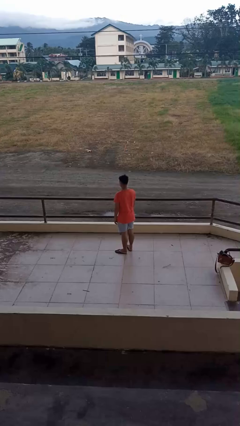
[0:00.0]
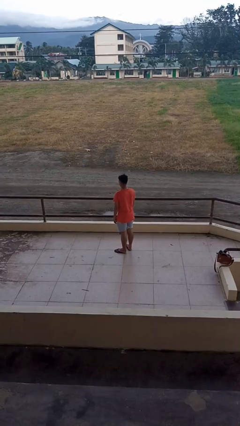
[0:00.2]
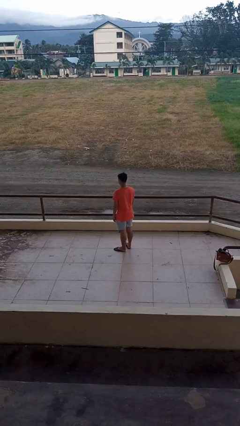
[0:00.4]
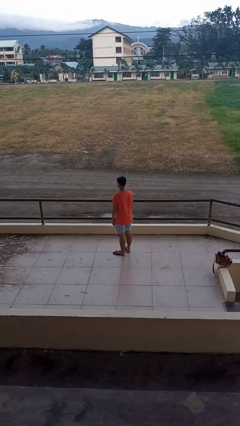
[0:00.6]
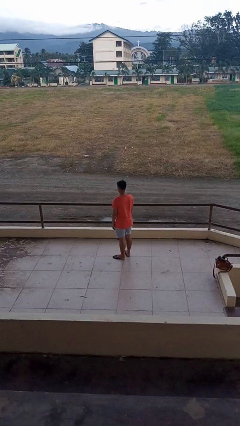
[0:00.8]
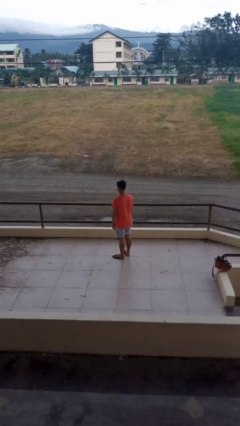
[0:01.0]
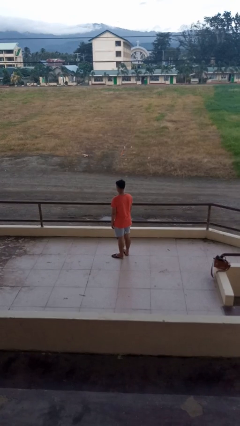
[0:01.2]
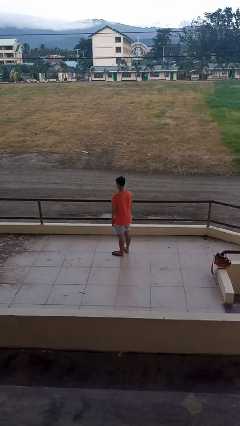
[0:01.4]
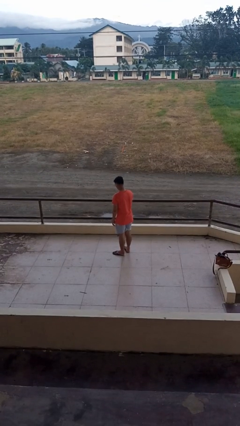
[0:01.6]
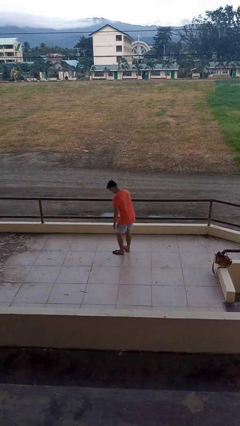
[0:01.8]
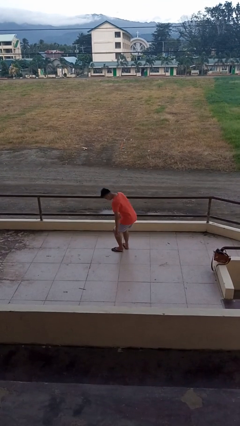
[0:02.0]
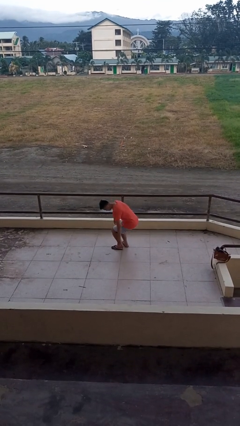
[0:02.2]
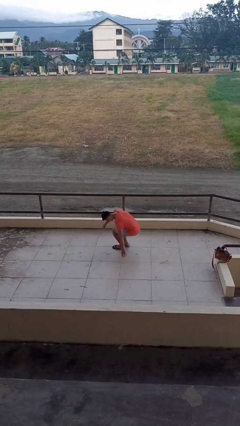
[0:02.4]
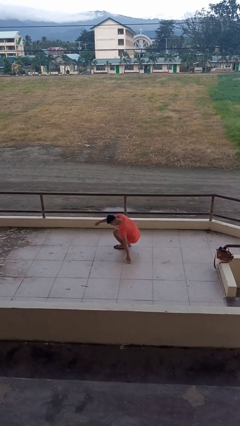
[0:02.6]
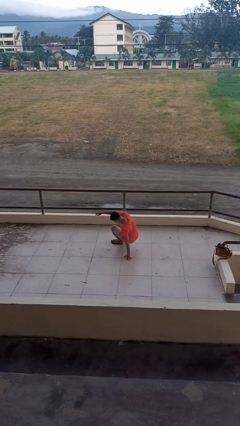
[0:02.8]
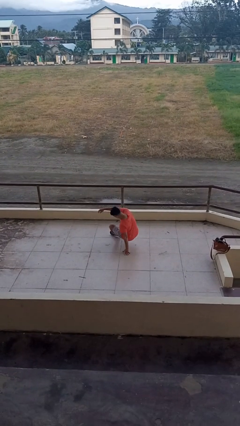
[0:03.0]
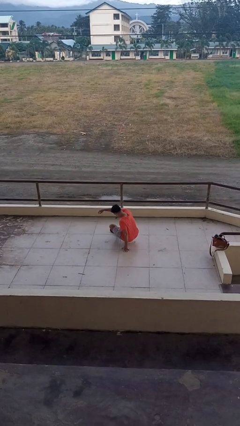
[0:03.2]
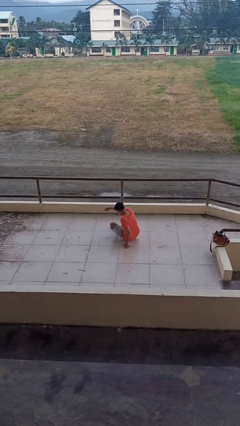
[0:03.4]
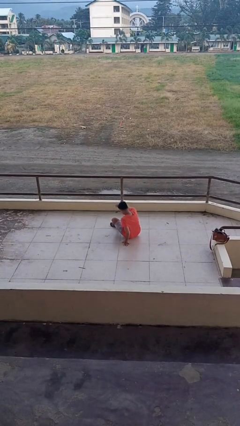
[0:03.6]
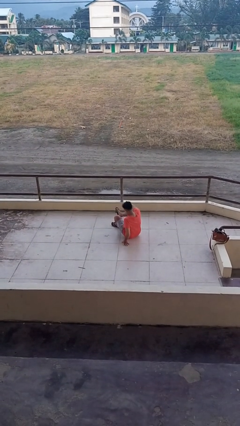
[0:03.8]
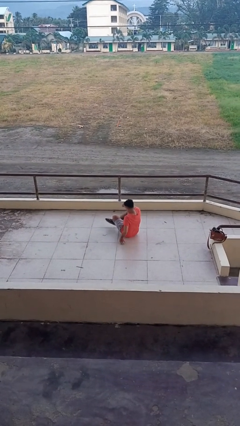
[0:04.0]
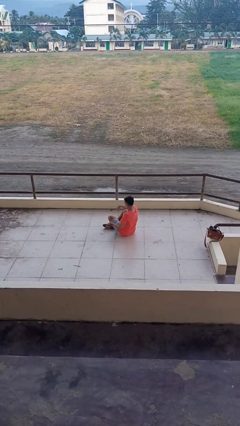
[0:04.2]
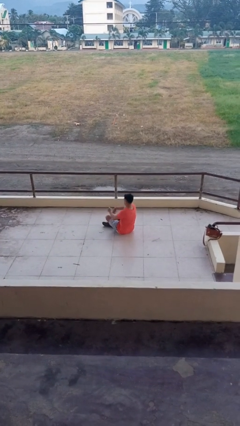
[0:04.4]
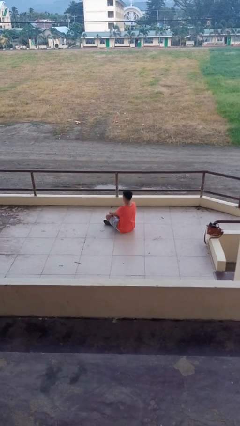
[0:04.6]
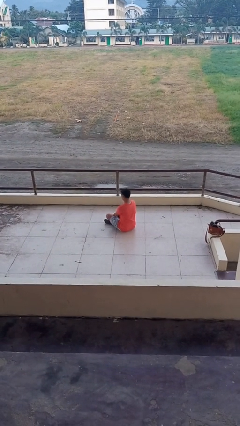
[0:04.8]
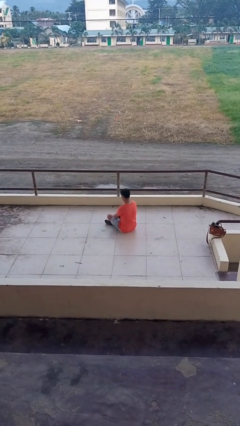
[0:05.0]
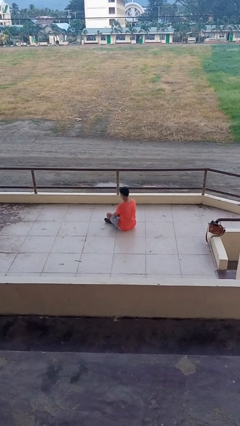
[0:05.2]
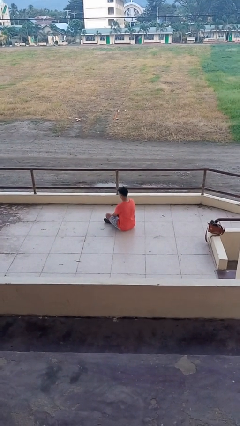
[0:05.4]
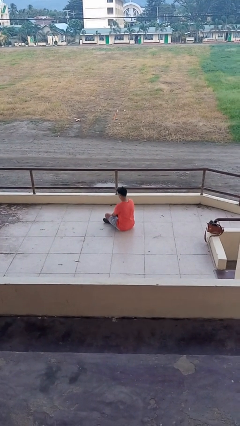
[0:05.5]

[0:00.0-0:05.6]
person sits crisscross

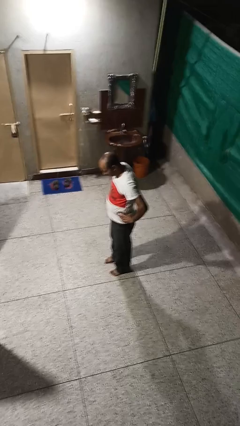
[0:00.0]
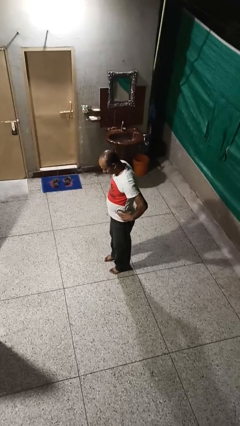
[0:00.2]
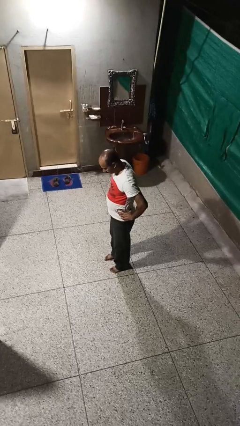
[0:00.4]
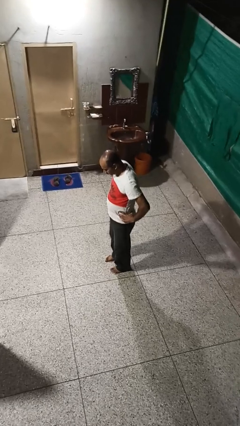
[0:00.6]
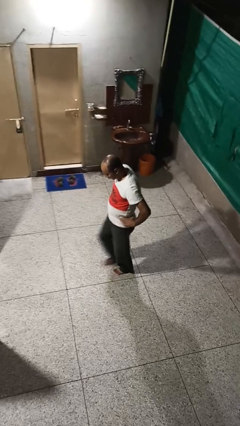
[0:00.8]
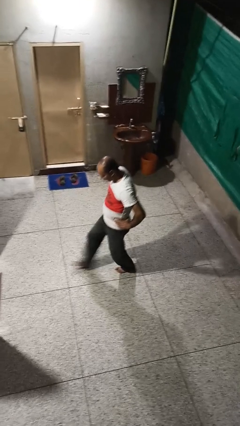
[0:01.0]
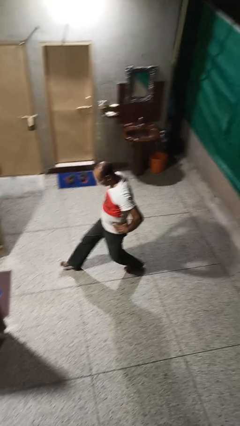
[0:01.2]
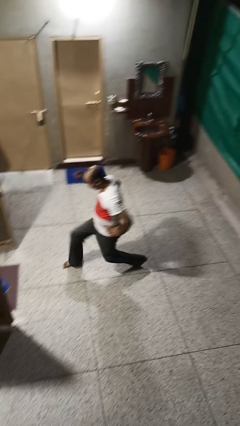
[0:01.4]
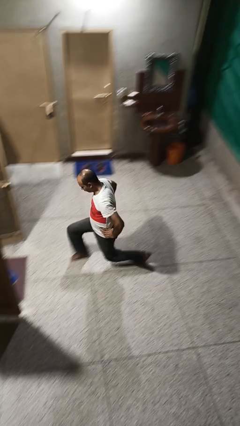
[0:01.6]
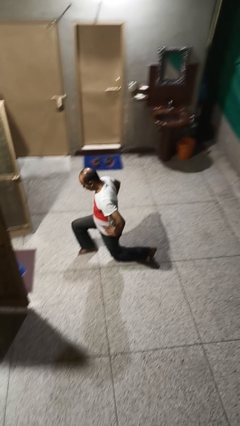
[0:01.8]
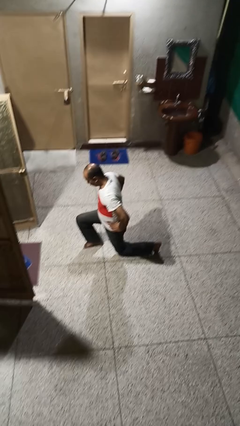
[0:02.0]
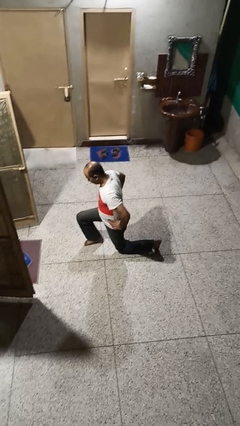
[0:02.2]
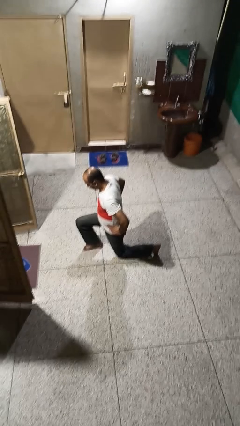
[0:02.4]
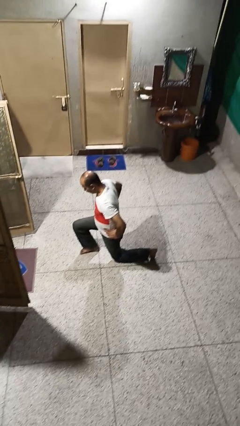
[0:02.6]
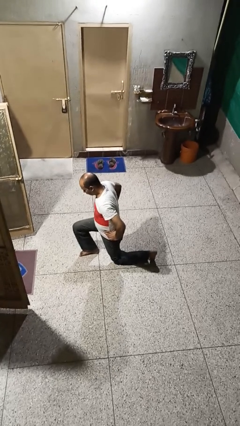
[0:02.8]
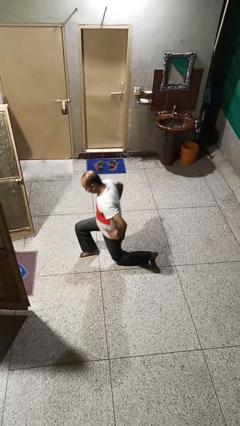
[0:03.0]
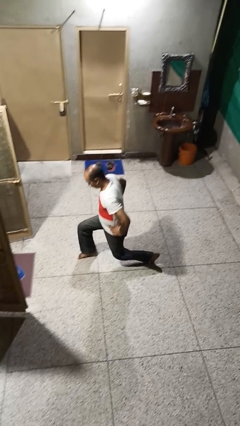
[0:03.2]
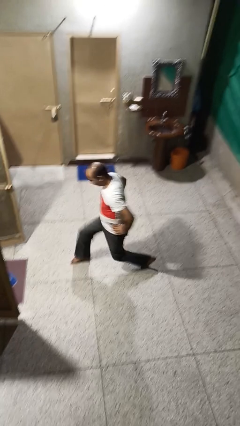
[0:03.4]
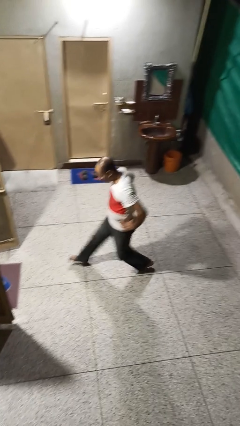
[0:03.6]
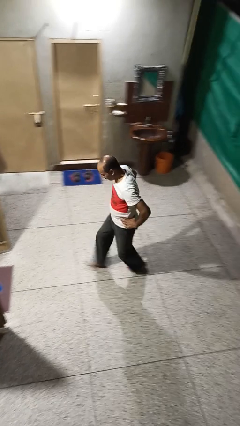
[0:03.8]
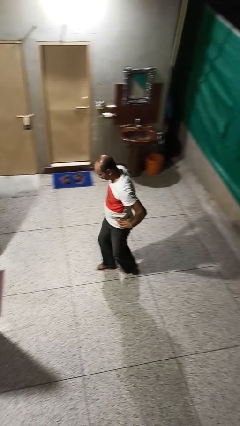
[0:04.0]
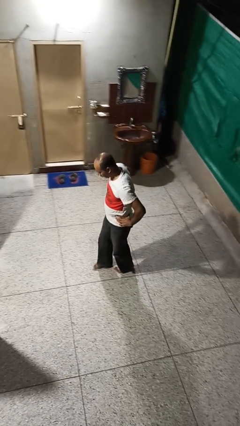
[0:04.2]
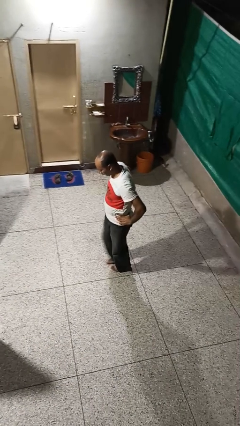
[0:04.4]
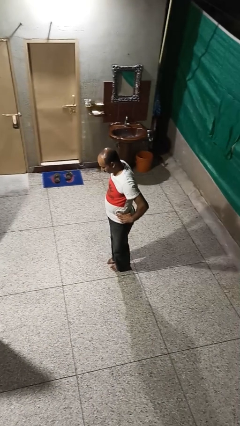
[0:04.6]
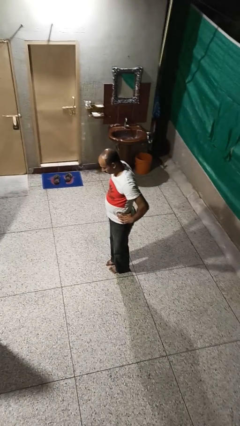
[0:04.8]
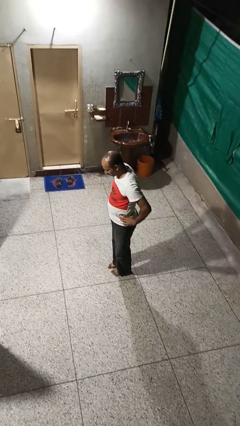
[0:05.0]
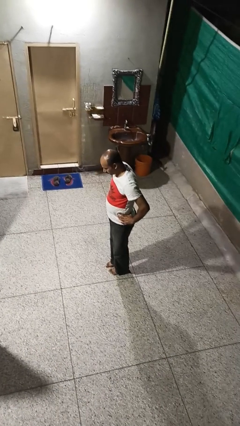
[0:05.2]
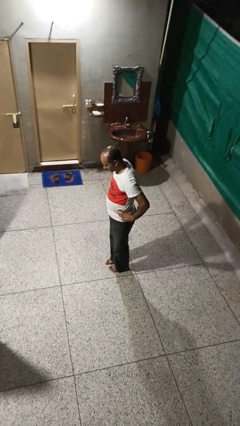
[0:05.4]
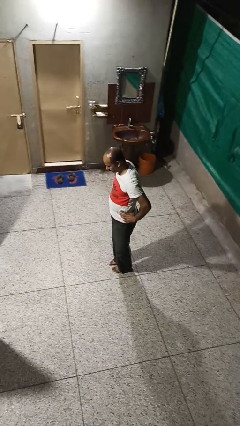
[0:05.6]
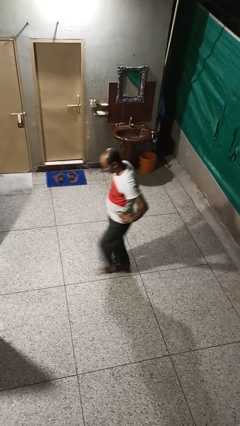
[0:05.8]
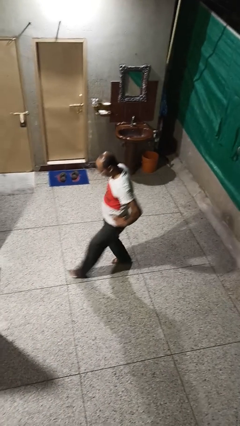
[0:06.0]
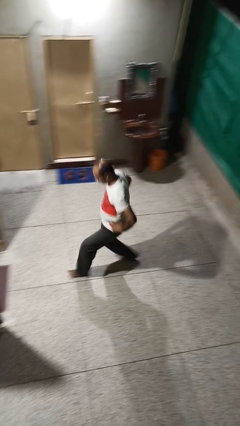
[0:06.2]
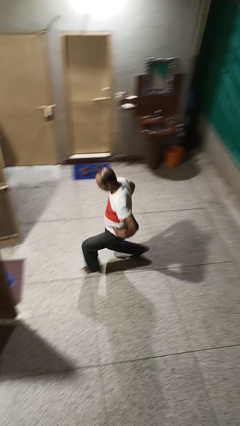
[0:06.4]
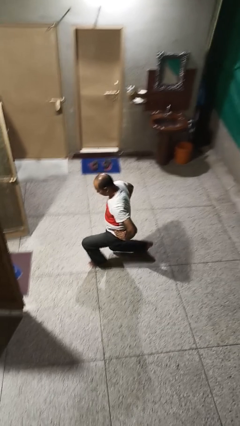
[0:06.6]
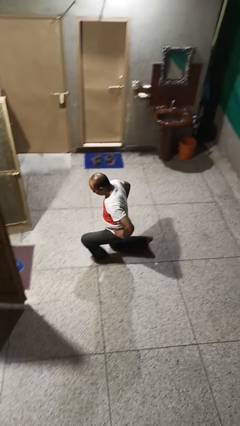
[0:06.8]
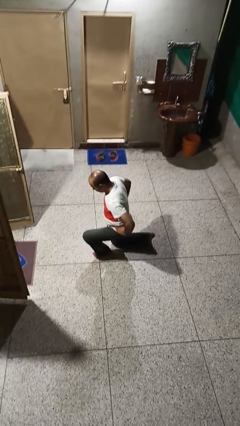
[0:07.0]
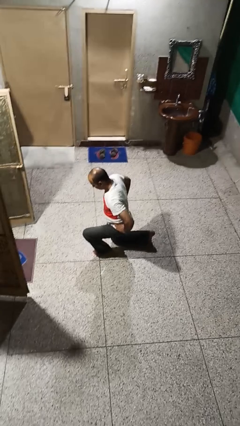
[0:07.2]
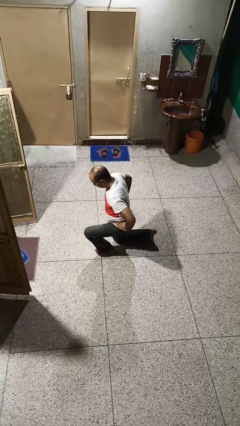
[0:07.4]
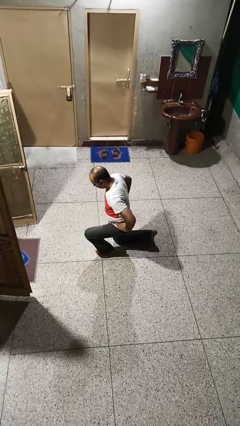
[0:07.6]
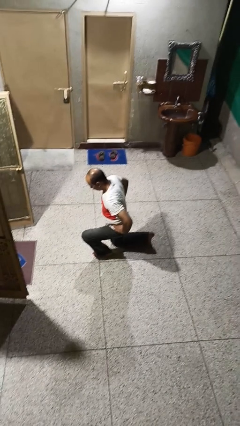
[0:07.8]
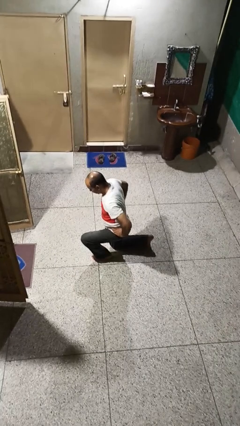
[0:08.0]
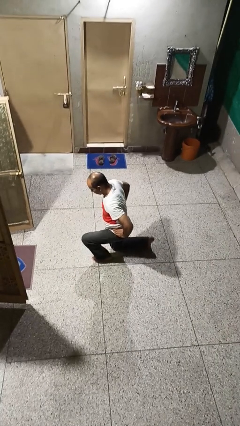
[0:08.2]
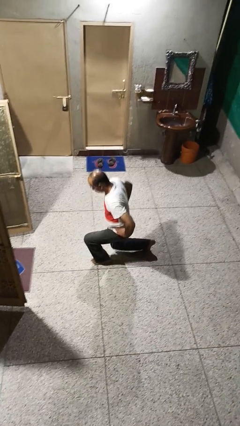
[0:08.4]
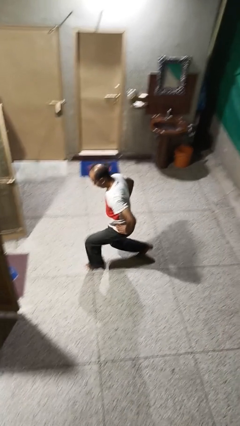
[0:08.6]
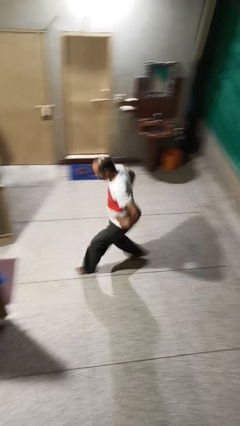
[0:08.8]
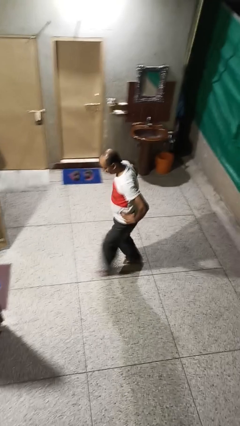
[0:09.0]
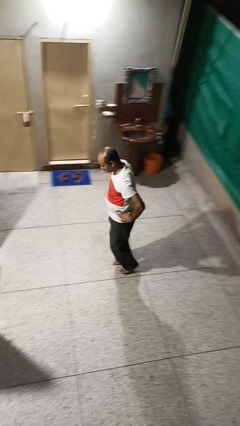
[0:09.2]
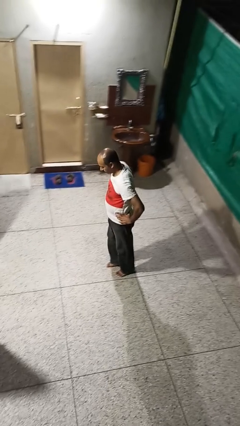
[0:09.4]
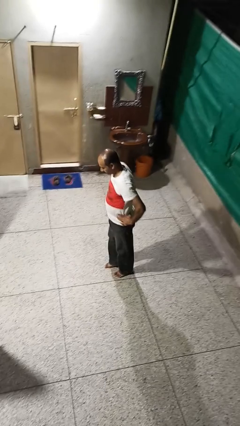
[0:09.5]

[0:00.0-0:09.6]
person exercises with lunges

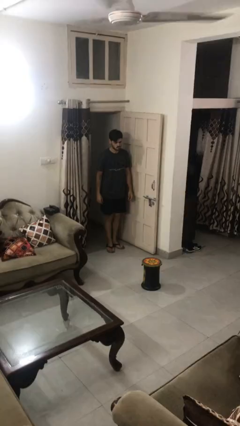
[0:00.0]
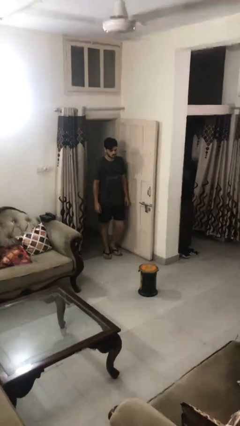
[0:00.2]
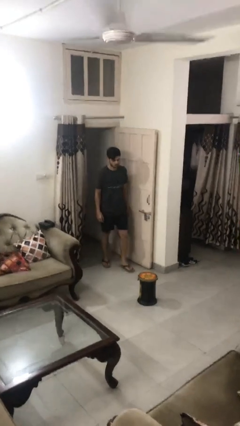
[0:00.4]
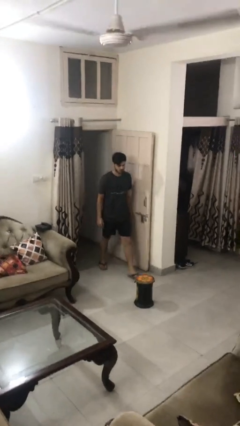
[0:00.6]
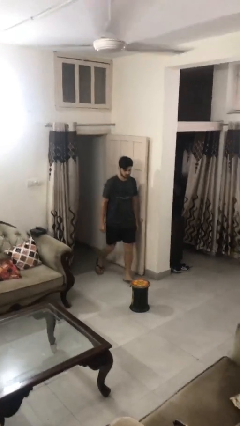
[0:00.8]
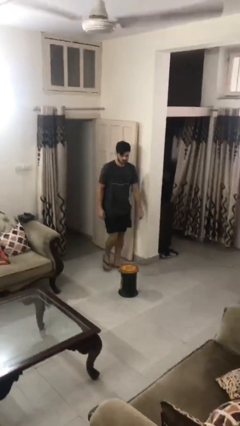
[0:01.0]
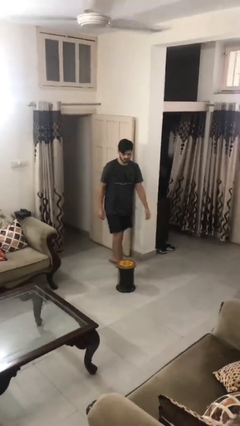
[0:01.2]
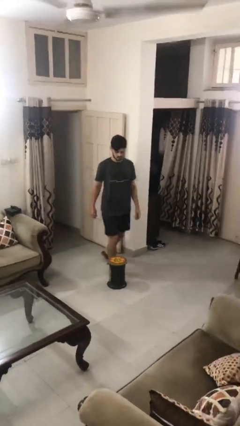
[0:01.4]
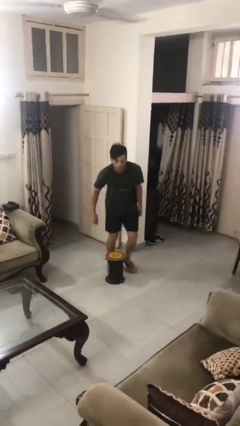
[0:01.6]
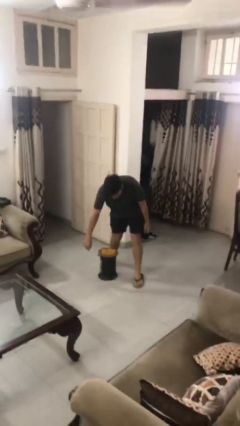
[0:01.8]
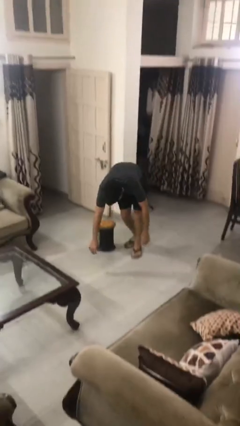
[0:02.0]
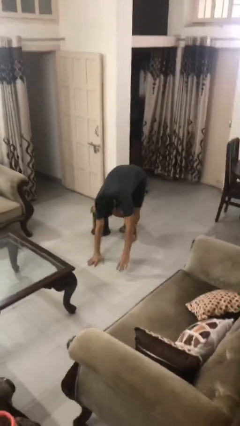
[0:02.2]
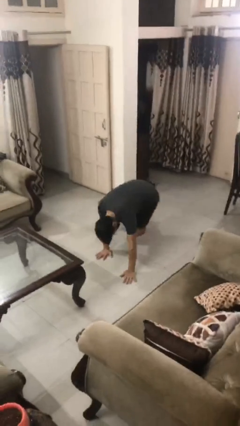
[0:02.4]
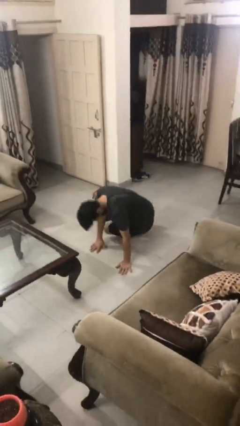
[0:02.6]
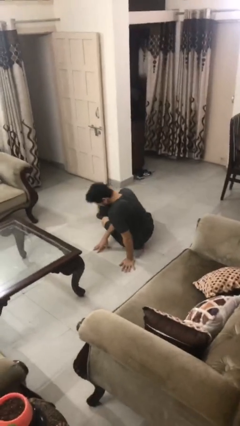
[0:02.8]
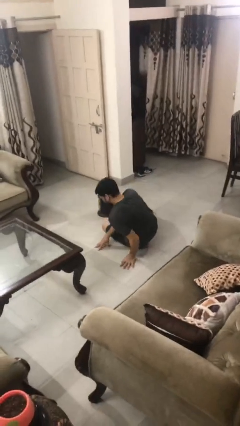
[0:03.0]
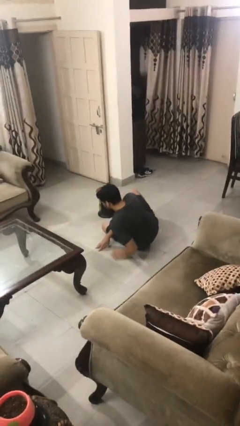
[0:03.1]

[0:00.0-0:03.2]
person trips on object on floor
